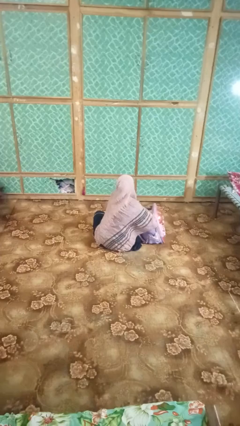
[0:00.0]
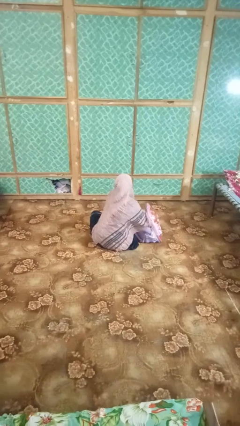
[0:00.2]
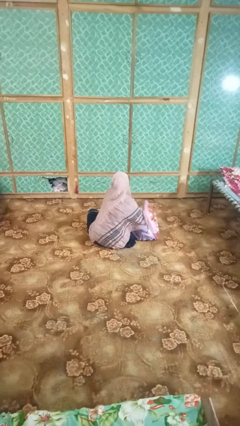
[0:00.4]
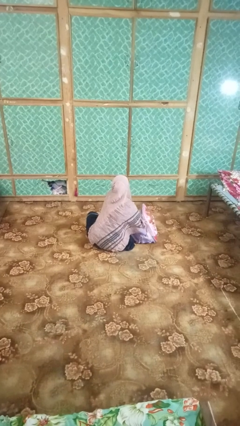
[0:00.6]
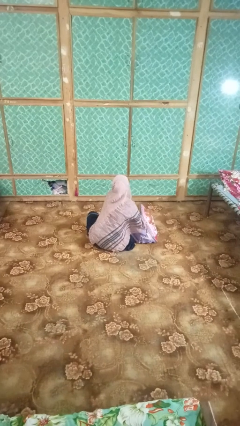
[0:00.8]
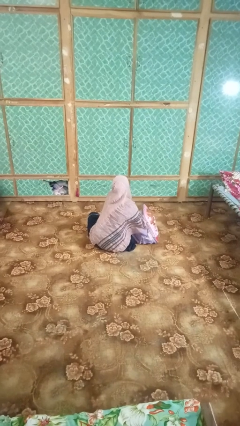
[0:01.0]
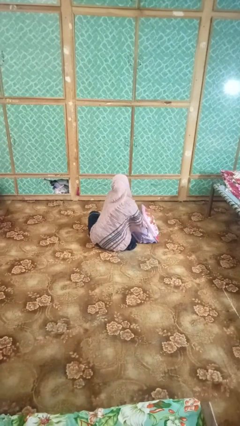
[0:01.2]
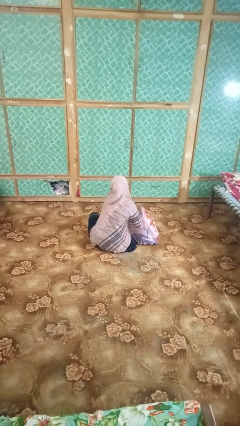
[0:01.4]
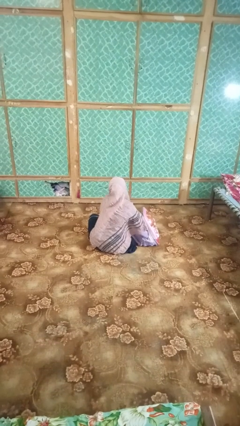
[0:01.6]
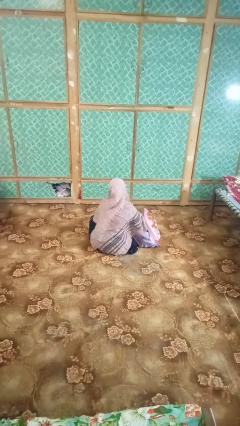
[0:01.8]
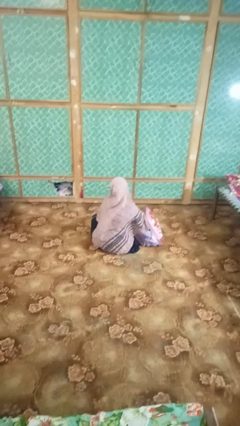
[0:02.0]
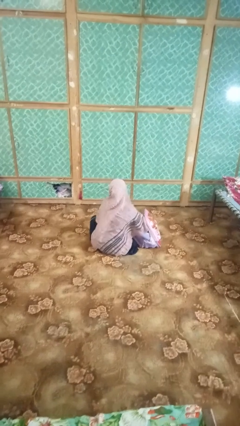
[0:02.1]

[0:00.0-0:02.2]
person searches in bag

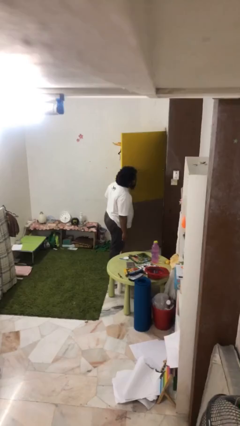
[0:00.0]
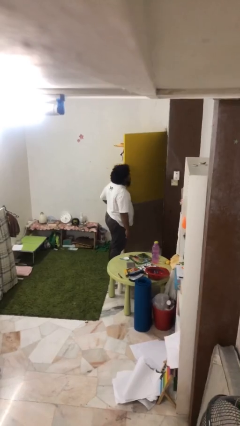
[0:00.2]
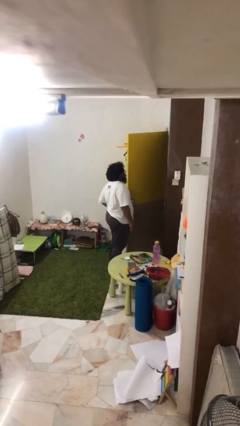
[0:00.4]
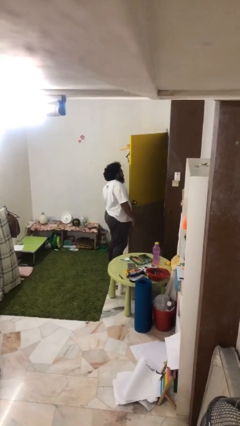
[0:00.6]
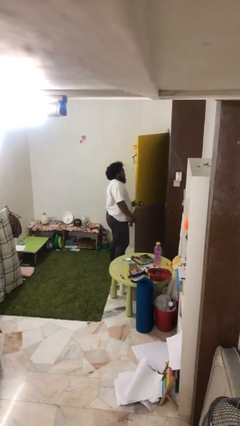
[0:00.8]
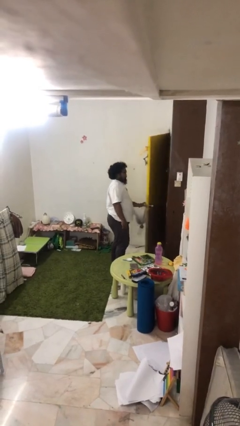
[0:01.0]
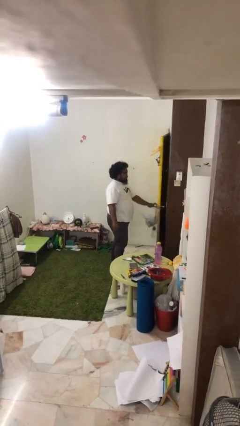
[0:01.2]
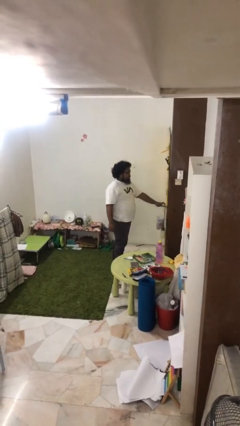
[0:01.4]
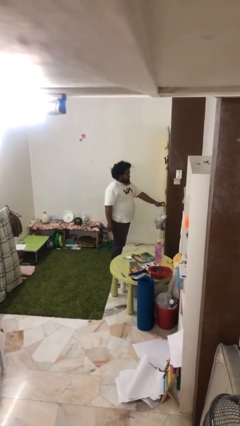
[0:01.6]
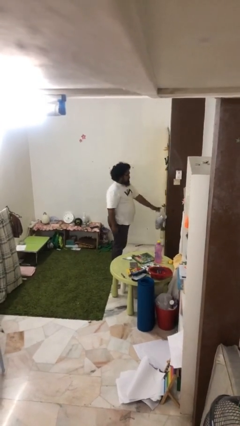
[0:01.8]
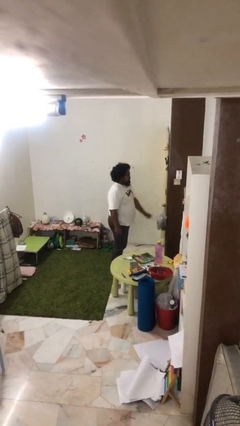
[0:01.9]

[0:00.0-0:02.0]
person closes facility door

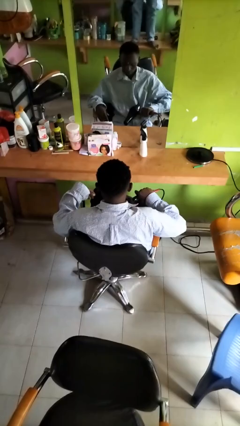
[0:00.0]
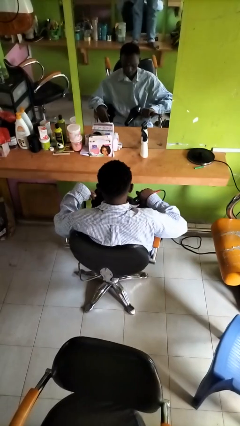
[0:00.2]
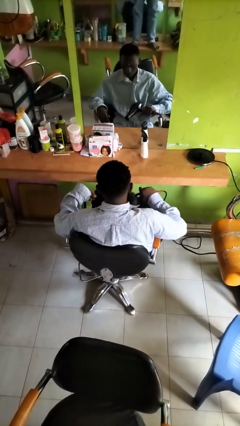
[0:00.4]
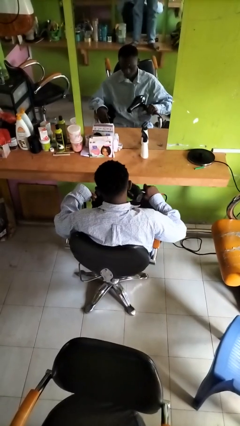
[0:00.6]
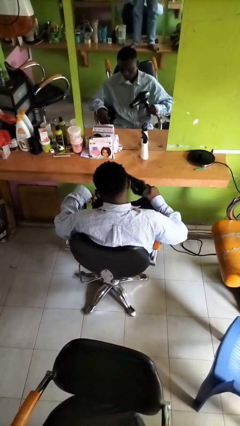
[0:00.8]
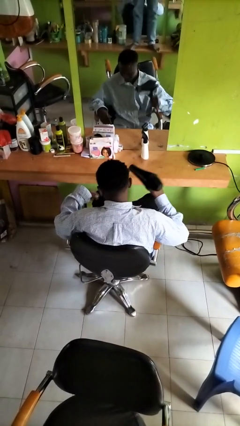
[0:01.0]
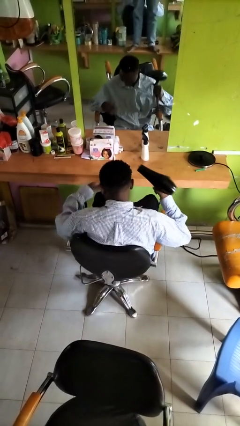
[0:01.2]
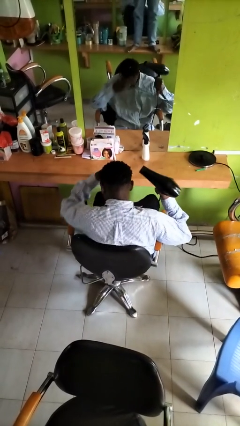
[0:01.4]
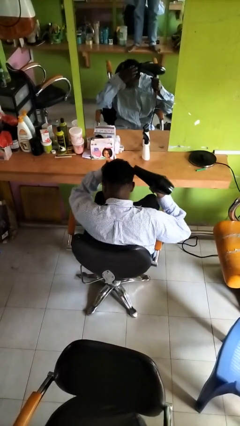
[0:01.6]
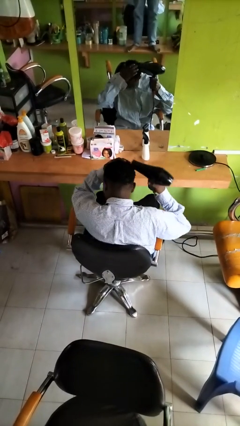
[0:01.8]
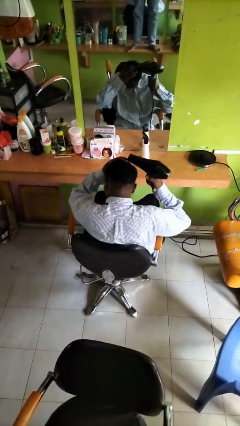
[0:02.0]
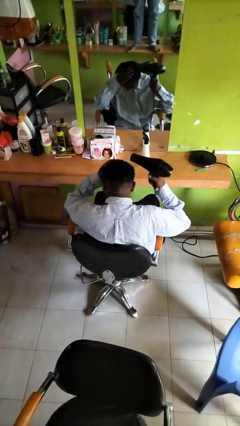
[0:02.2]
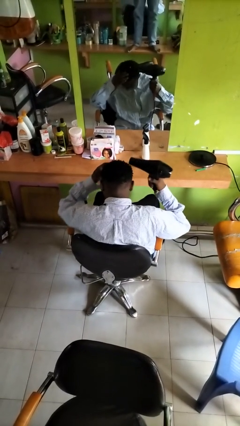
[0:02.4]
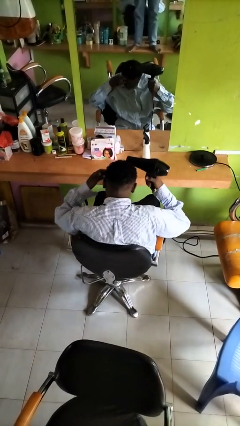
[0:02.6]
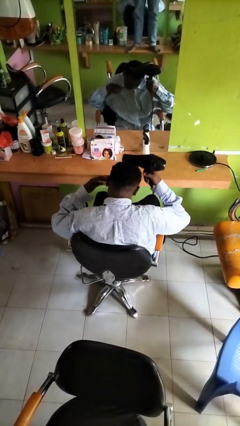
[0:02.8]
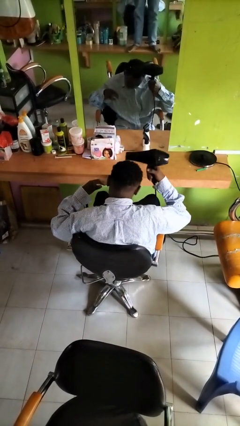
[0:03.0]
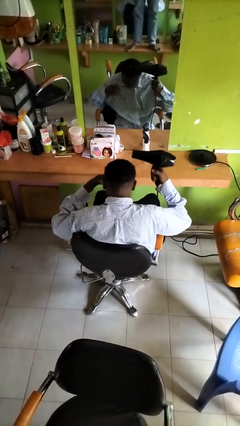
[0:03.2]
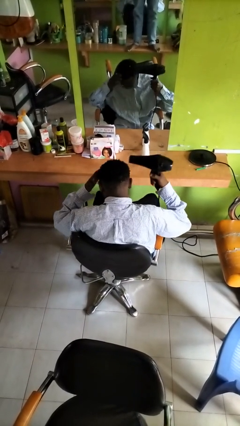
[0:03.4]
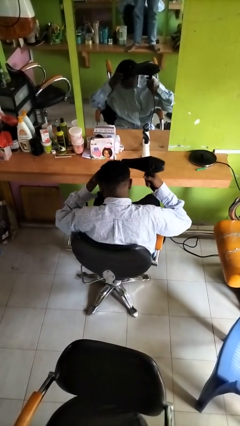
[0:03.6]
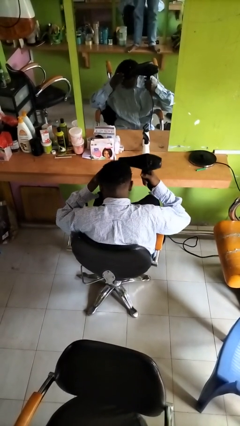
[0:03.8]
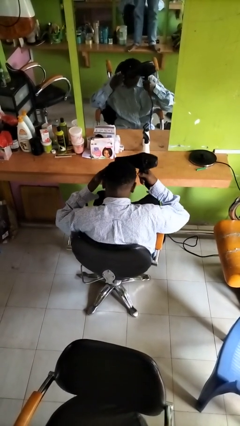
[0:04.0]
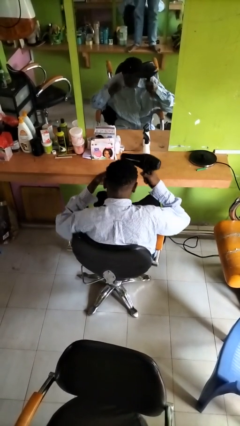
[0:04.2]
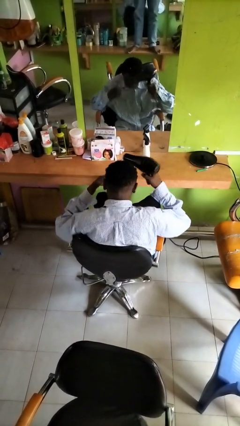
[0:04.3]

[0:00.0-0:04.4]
person dries hair with hairdryer

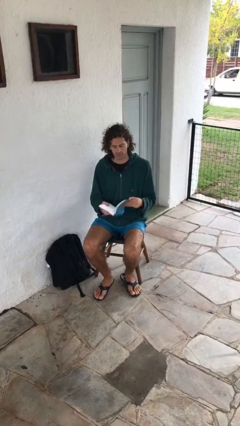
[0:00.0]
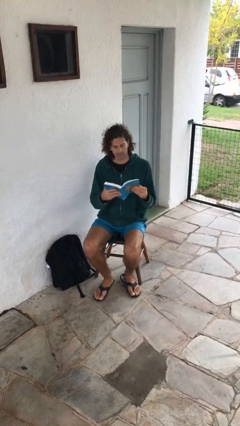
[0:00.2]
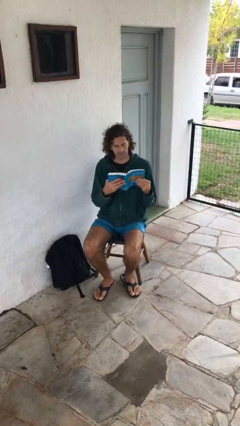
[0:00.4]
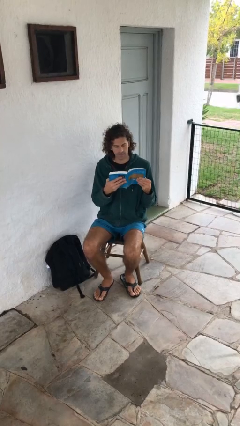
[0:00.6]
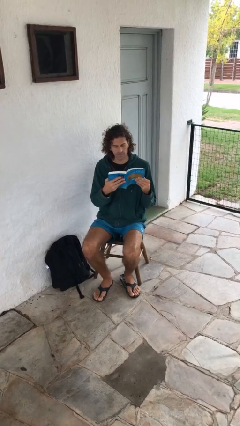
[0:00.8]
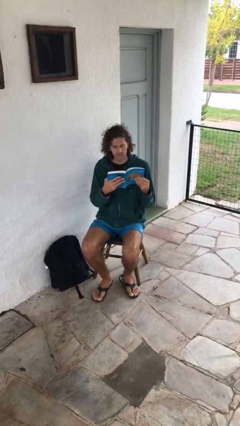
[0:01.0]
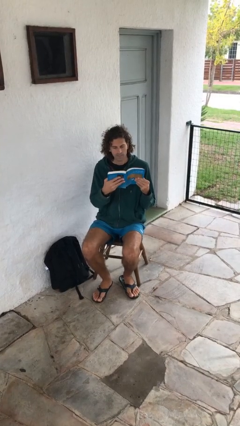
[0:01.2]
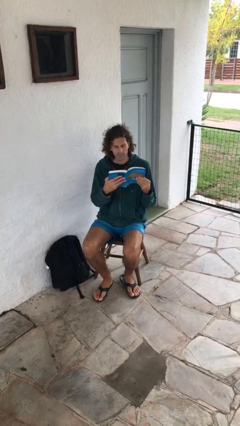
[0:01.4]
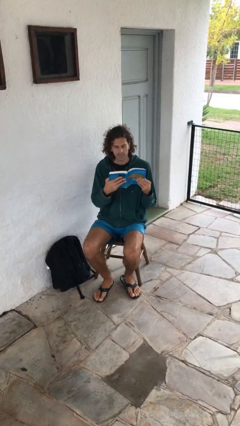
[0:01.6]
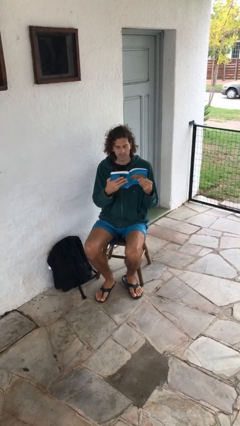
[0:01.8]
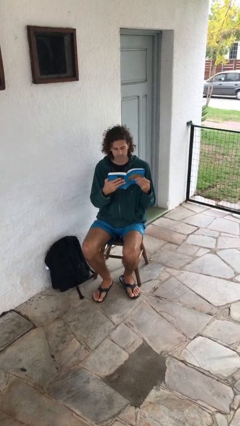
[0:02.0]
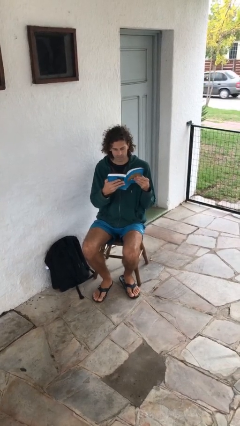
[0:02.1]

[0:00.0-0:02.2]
person reads document

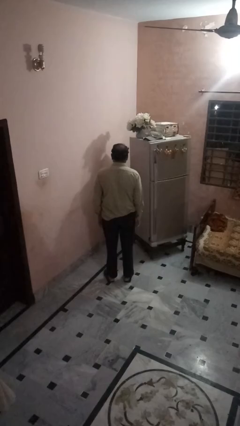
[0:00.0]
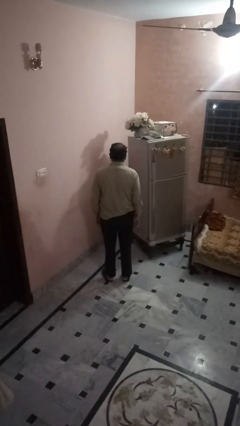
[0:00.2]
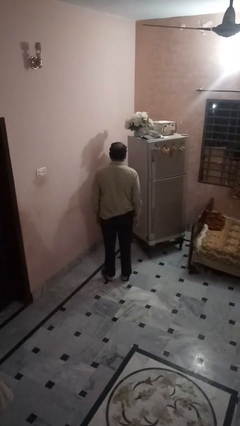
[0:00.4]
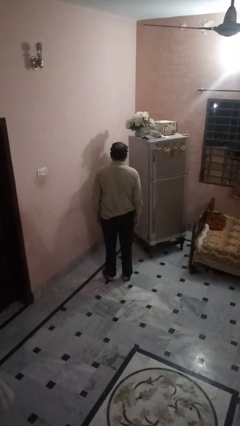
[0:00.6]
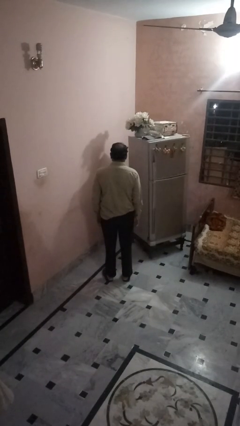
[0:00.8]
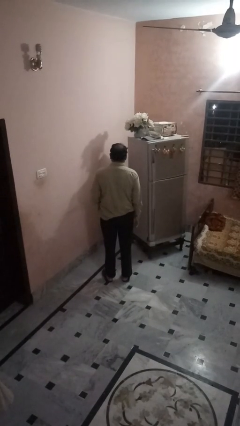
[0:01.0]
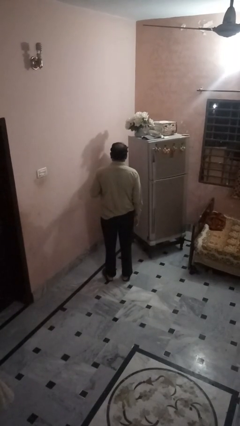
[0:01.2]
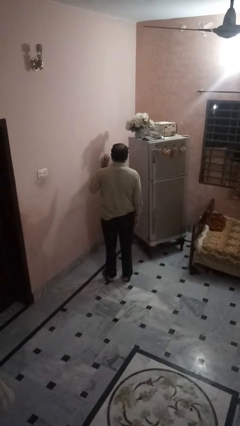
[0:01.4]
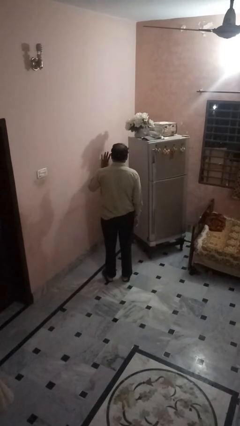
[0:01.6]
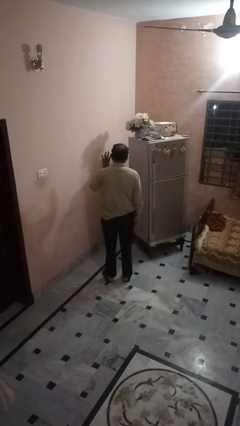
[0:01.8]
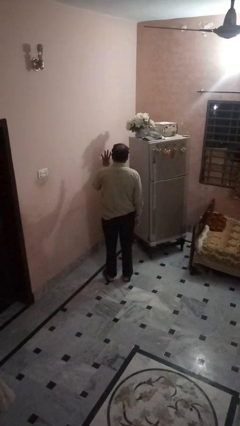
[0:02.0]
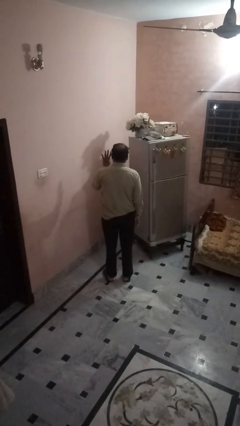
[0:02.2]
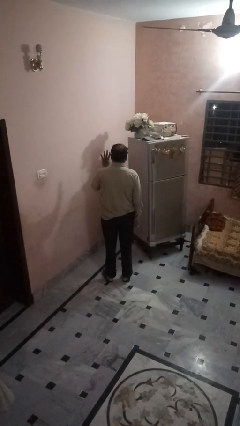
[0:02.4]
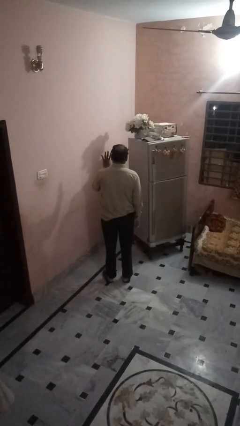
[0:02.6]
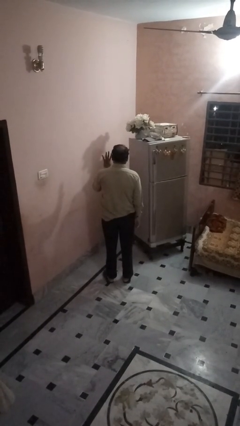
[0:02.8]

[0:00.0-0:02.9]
person gestures number four

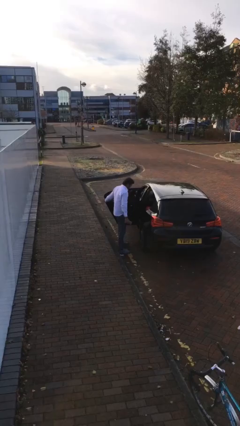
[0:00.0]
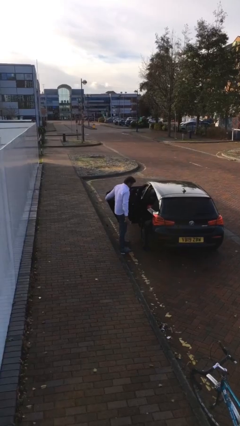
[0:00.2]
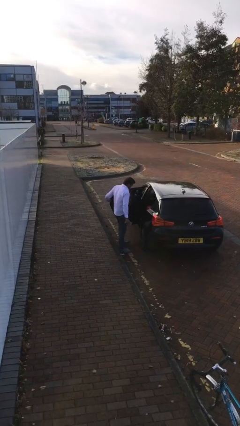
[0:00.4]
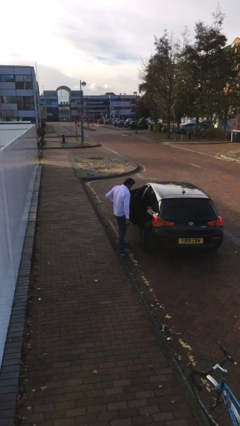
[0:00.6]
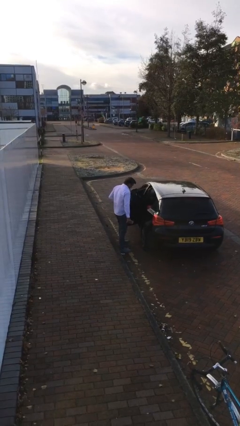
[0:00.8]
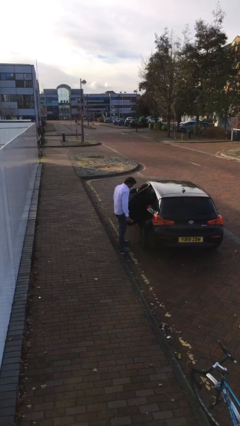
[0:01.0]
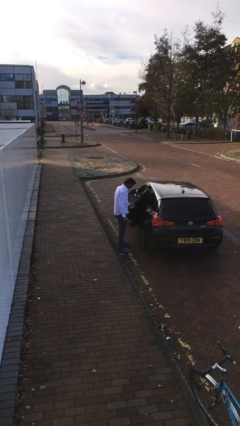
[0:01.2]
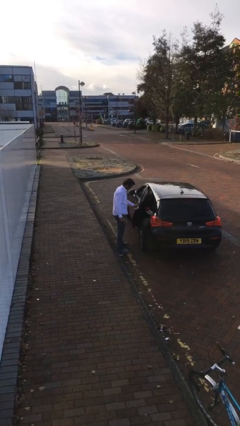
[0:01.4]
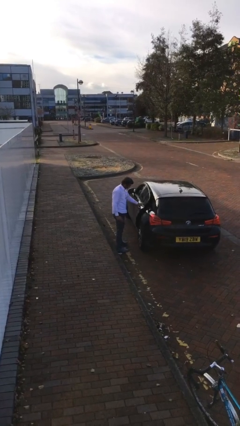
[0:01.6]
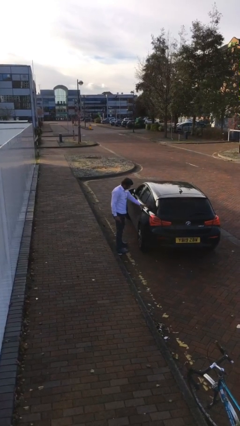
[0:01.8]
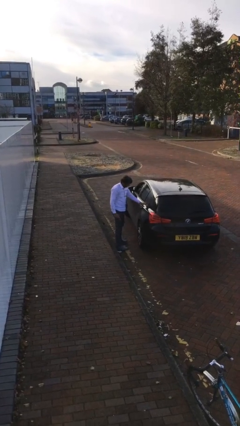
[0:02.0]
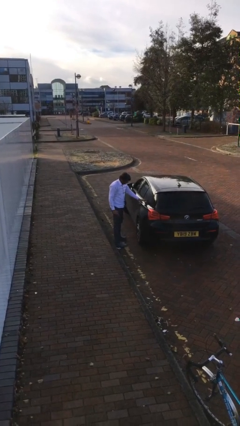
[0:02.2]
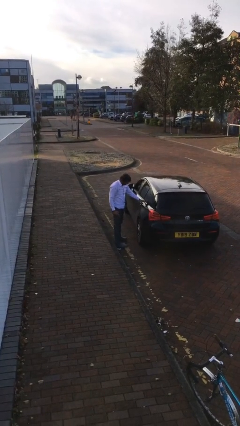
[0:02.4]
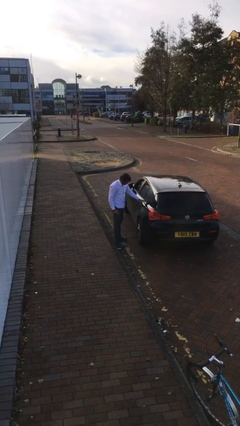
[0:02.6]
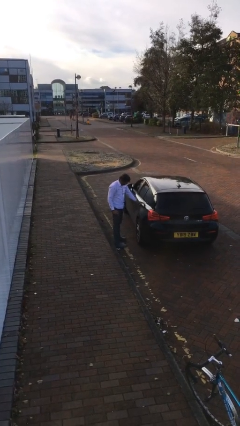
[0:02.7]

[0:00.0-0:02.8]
person closes car door

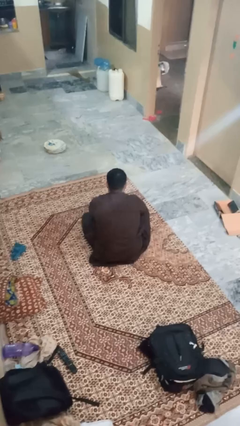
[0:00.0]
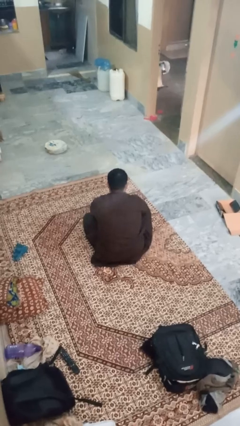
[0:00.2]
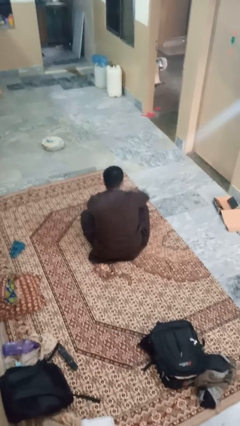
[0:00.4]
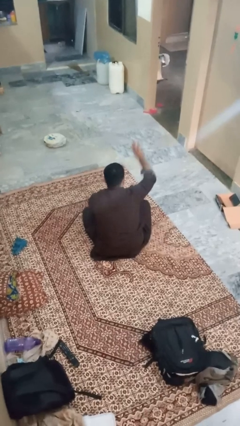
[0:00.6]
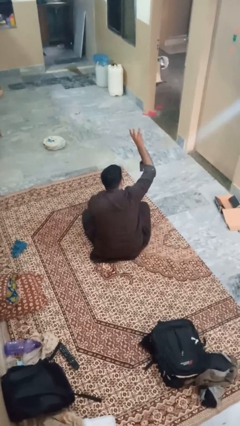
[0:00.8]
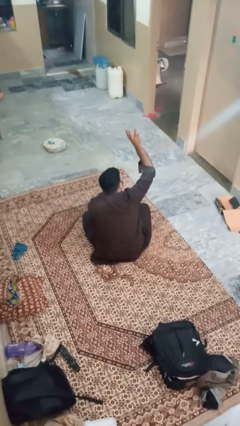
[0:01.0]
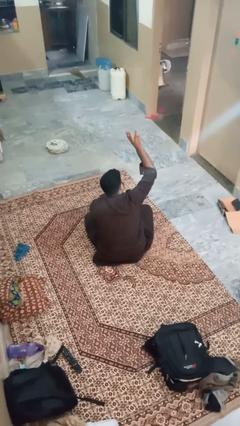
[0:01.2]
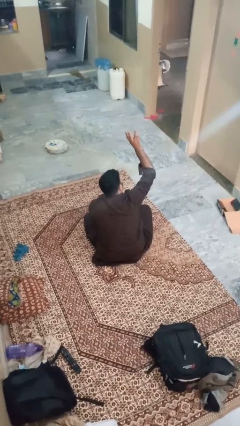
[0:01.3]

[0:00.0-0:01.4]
person gestures number three
